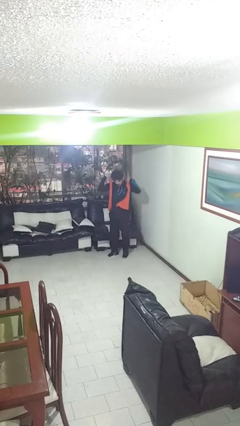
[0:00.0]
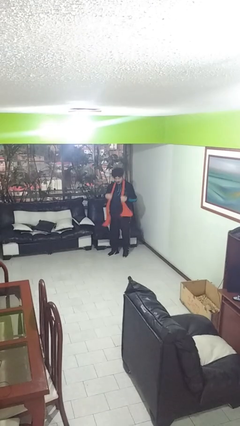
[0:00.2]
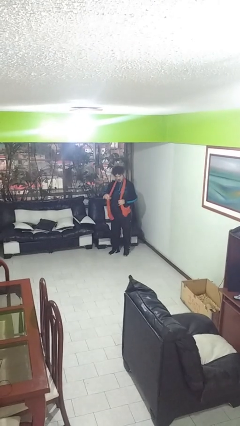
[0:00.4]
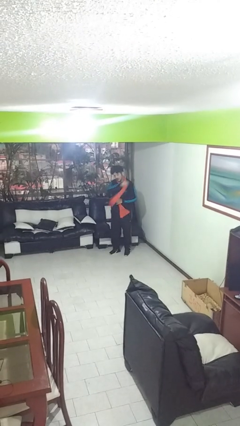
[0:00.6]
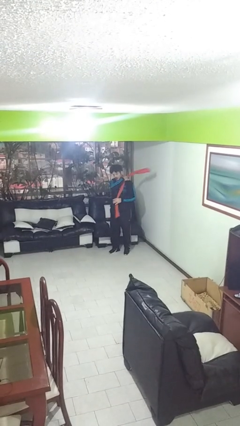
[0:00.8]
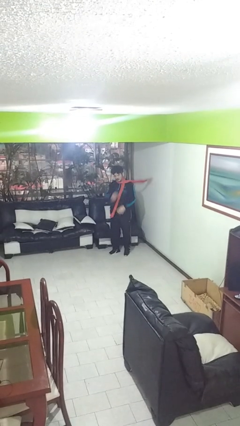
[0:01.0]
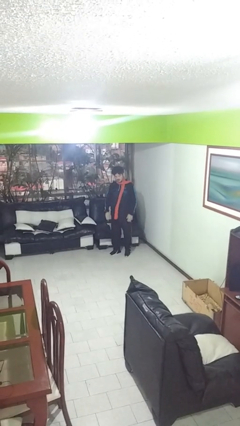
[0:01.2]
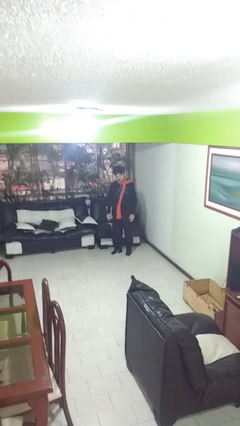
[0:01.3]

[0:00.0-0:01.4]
person puts on scarf

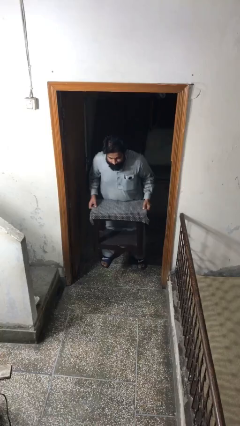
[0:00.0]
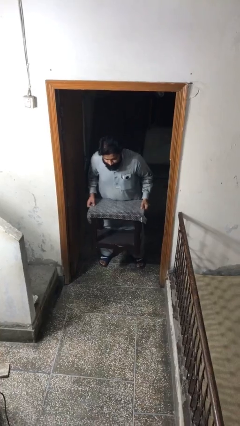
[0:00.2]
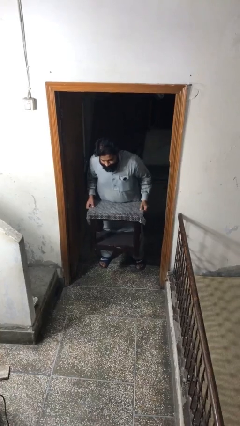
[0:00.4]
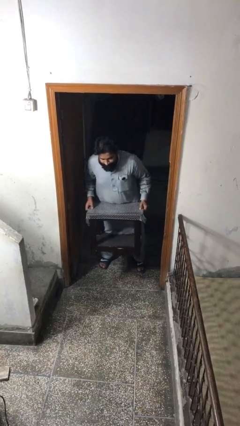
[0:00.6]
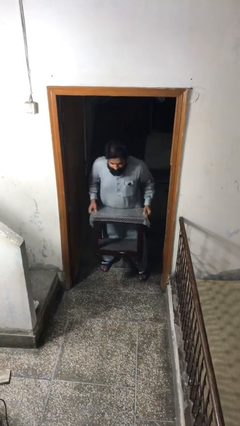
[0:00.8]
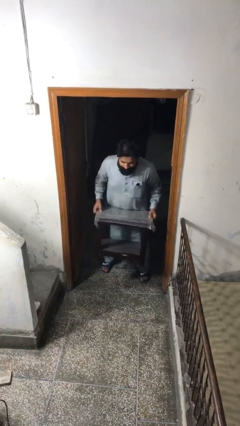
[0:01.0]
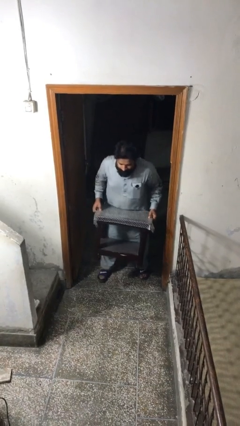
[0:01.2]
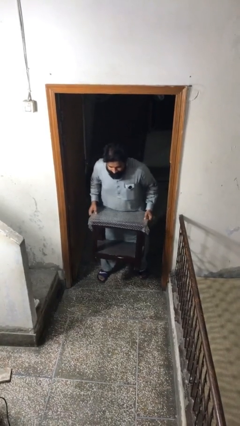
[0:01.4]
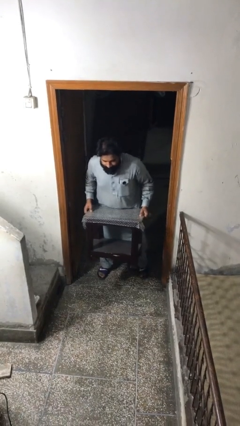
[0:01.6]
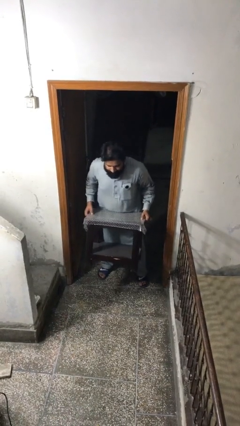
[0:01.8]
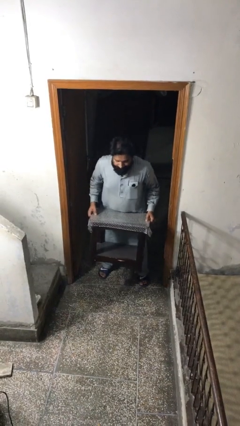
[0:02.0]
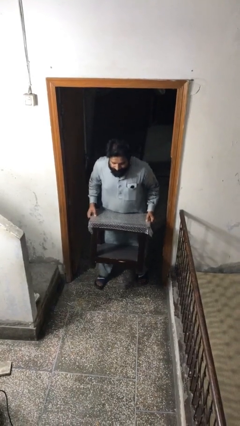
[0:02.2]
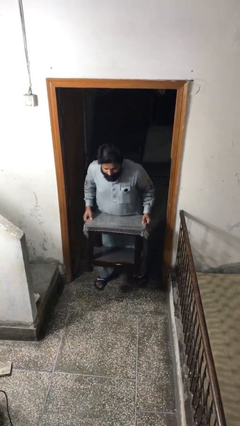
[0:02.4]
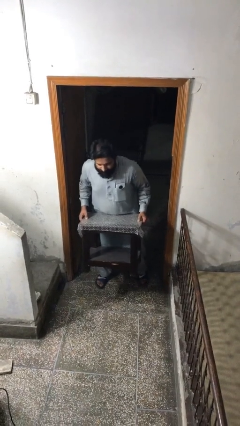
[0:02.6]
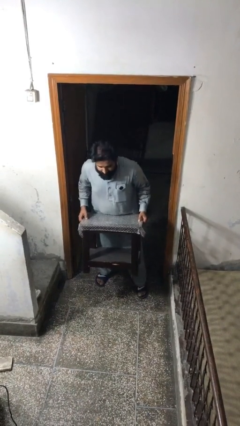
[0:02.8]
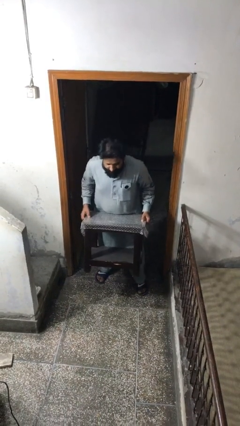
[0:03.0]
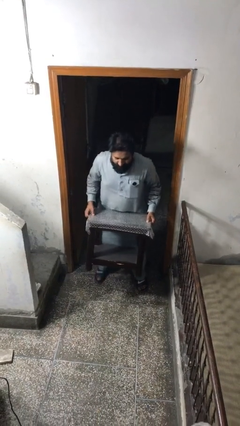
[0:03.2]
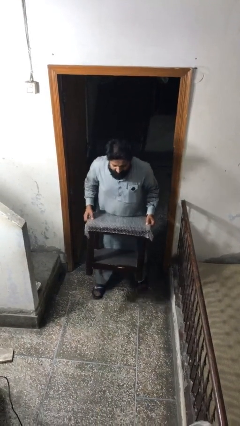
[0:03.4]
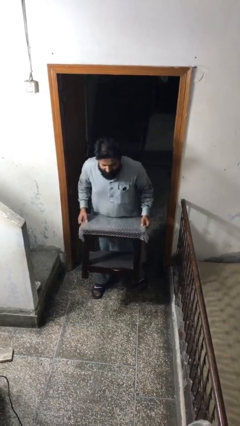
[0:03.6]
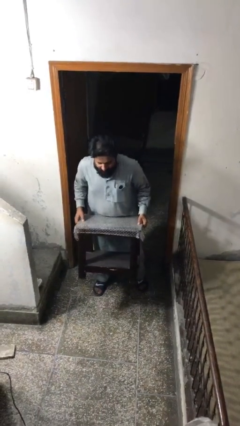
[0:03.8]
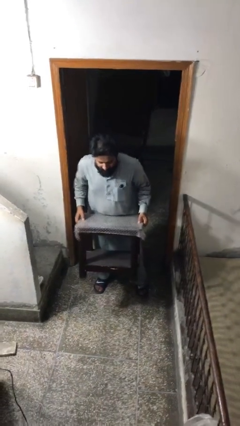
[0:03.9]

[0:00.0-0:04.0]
person carries heavy object

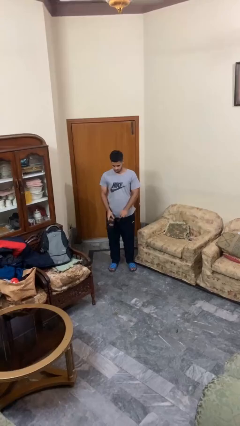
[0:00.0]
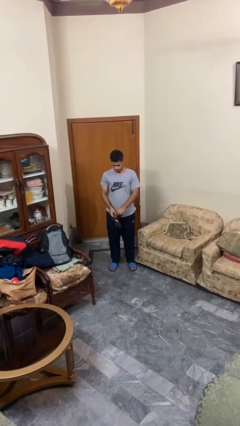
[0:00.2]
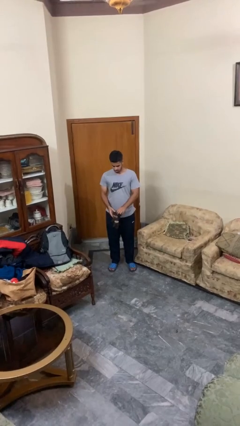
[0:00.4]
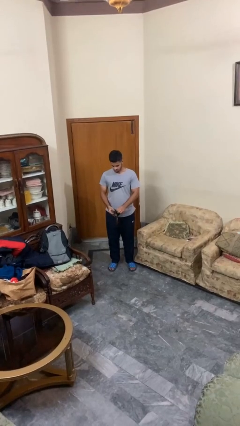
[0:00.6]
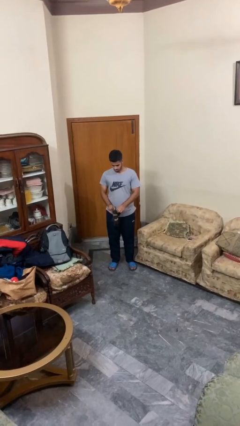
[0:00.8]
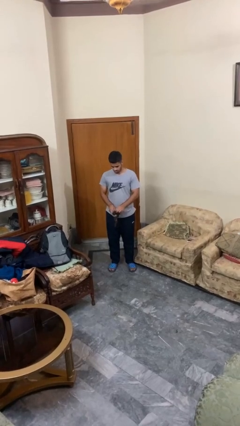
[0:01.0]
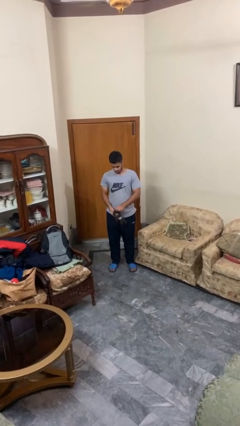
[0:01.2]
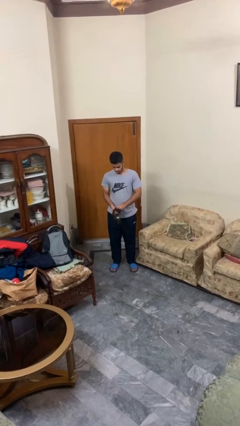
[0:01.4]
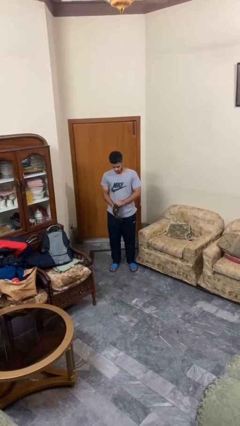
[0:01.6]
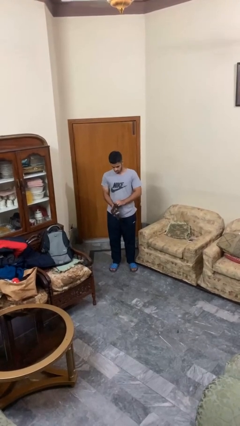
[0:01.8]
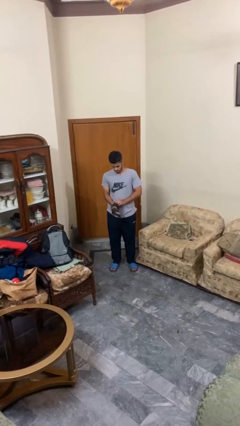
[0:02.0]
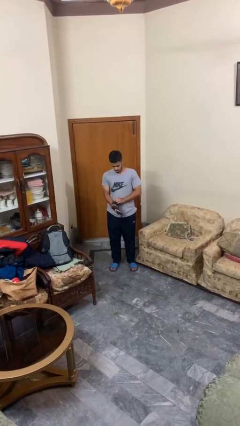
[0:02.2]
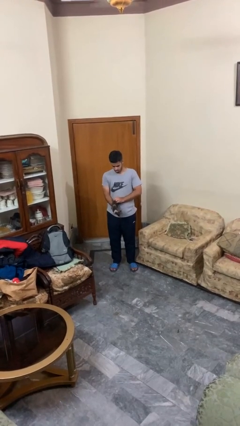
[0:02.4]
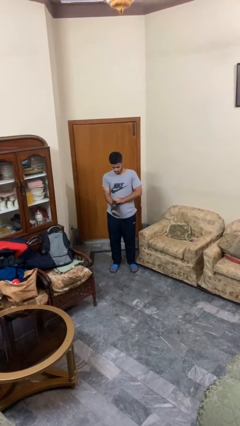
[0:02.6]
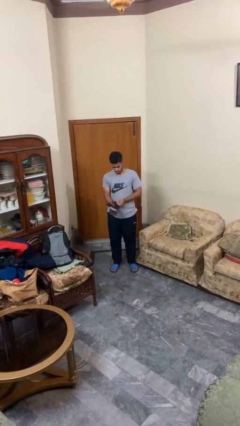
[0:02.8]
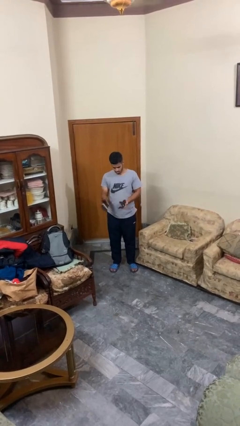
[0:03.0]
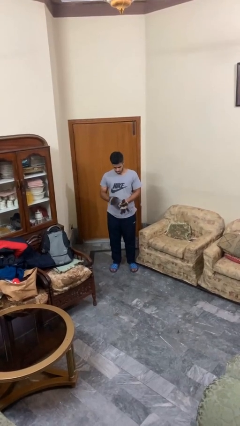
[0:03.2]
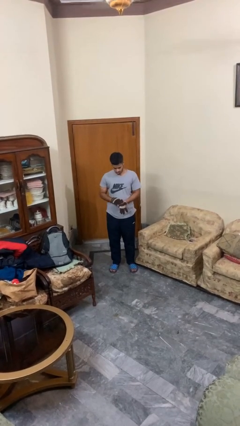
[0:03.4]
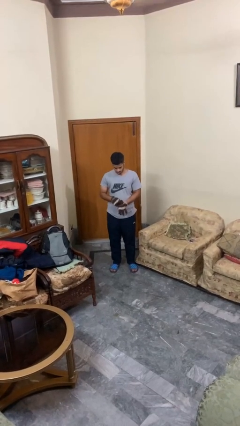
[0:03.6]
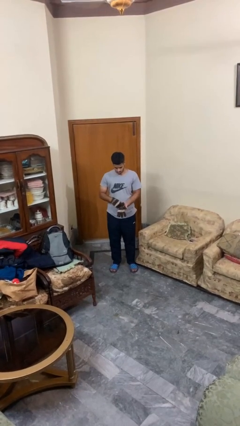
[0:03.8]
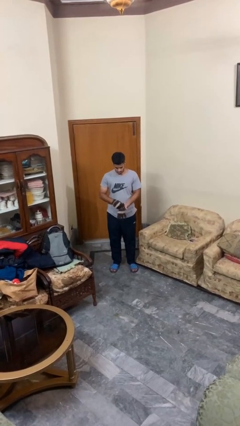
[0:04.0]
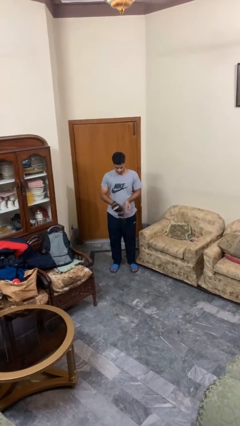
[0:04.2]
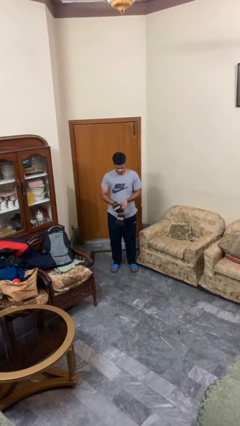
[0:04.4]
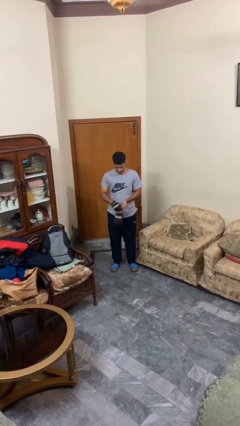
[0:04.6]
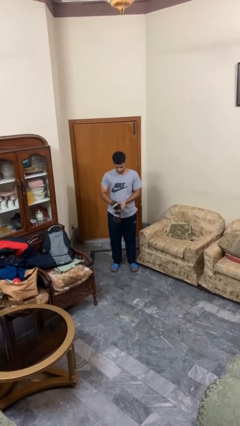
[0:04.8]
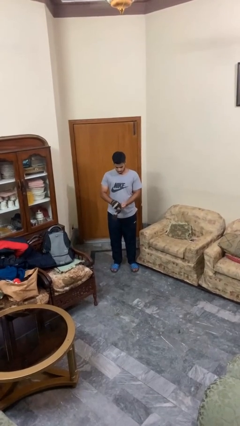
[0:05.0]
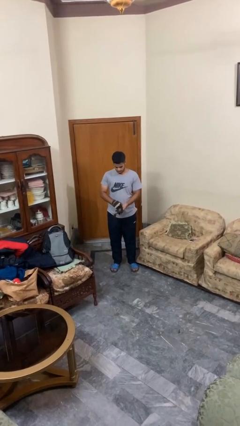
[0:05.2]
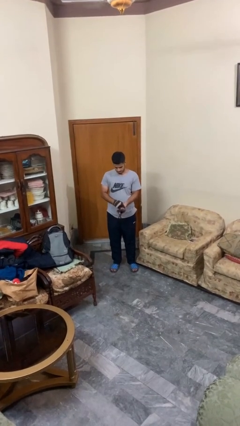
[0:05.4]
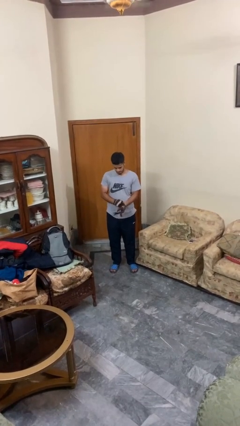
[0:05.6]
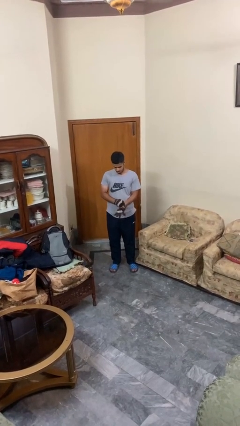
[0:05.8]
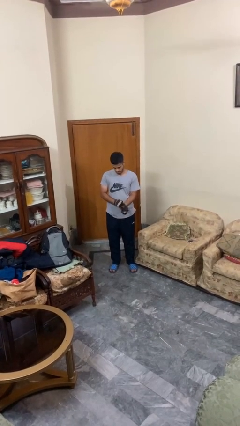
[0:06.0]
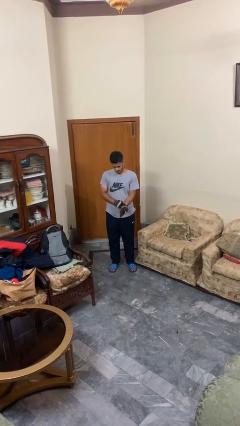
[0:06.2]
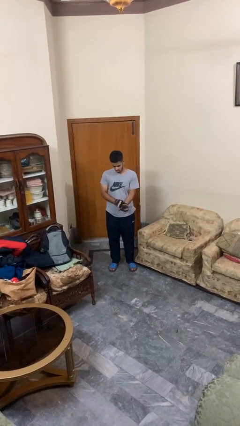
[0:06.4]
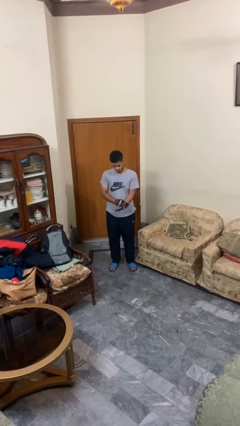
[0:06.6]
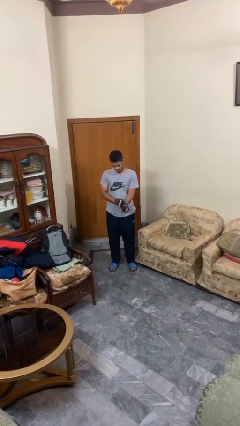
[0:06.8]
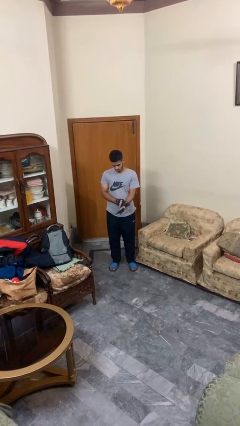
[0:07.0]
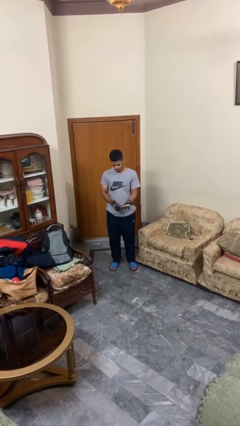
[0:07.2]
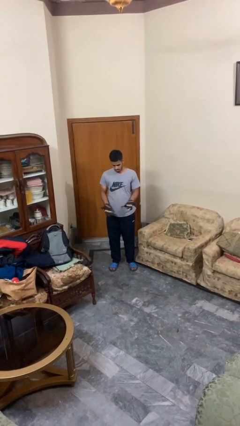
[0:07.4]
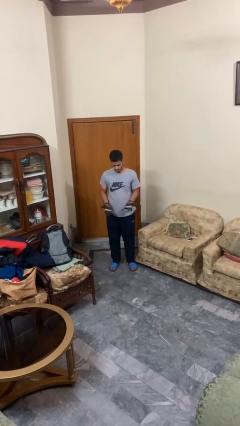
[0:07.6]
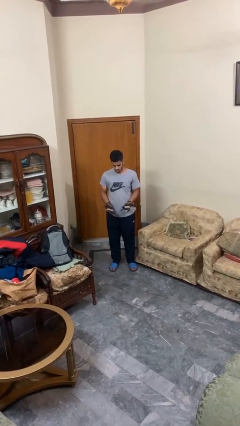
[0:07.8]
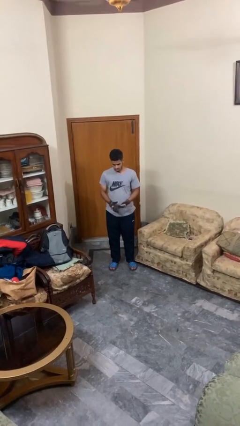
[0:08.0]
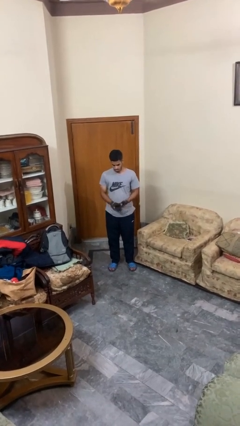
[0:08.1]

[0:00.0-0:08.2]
person puts on gloves

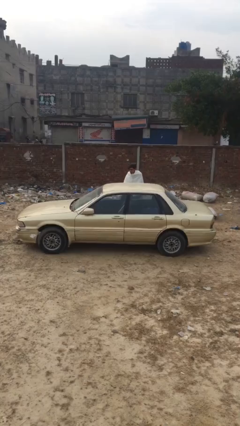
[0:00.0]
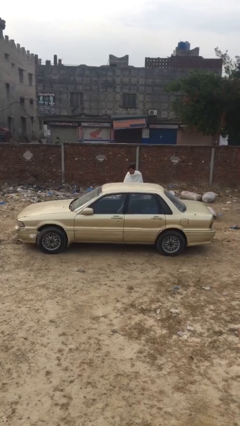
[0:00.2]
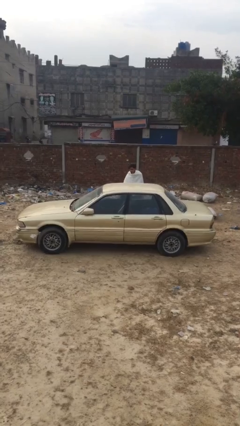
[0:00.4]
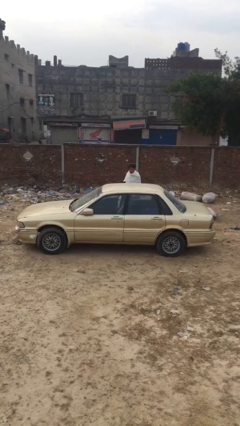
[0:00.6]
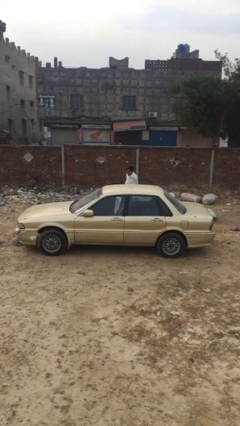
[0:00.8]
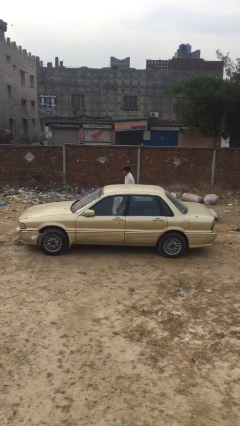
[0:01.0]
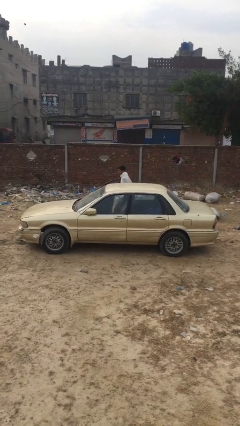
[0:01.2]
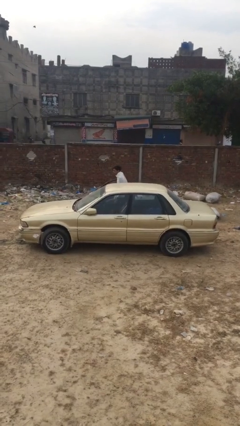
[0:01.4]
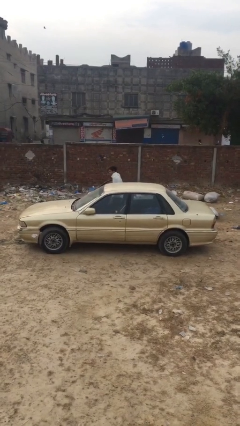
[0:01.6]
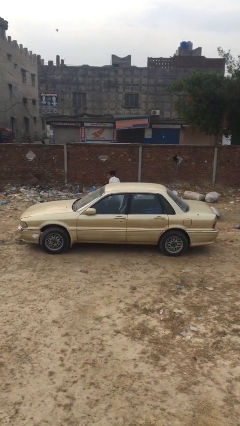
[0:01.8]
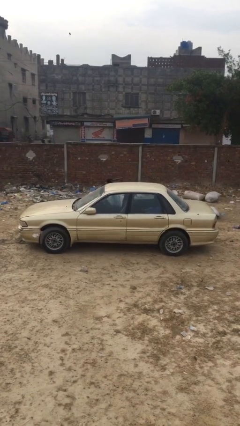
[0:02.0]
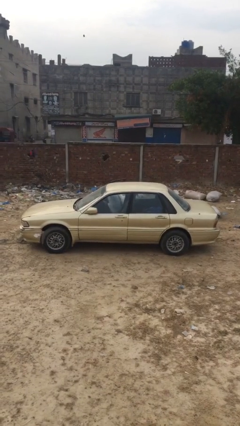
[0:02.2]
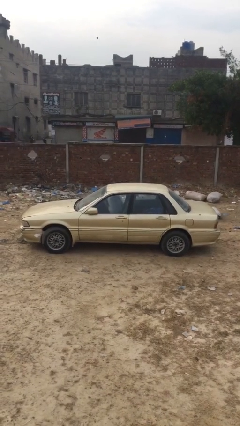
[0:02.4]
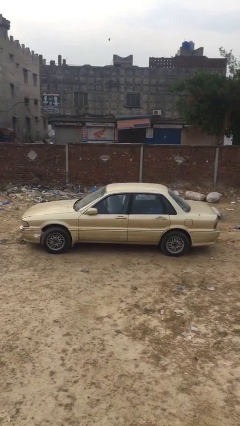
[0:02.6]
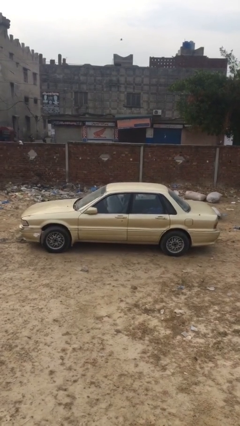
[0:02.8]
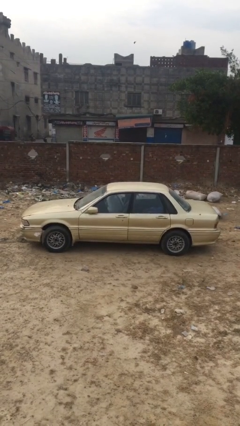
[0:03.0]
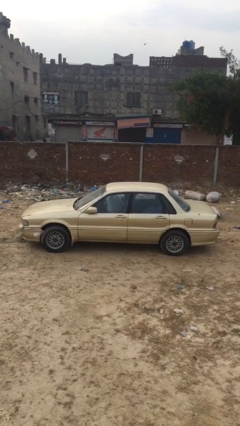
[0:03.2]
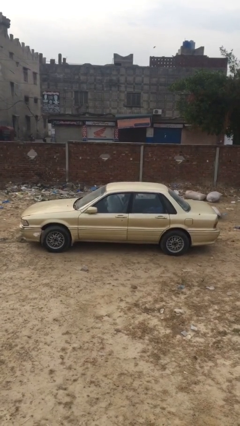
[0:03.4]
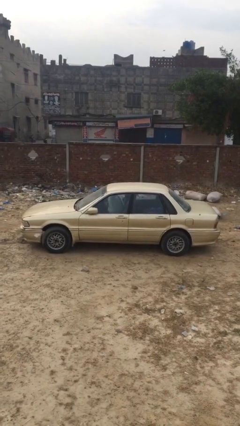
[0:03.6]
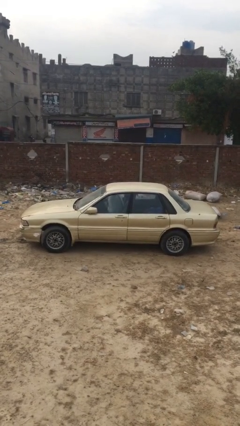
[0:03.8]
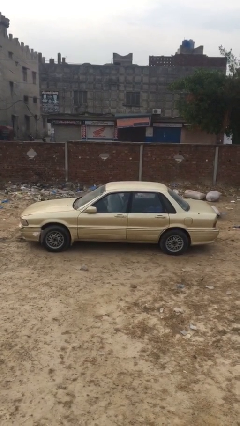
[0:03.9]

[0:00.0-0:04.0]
car picks up person
